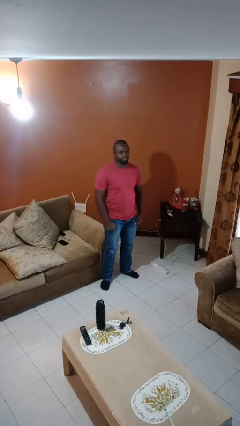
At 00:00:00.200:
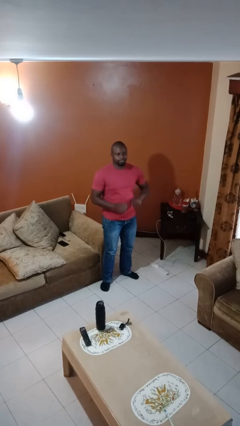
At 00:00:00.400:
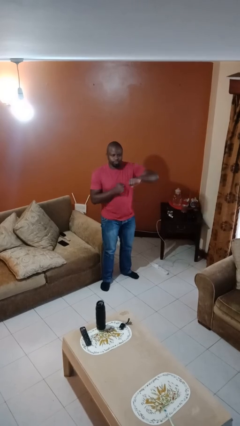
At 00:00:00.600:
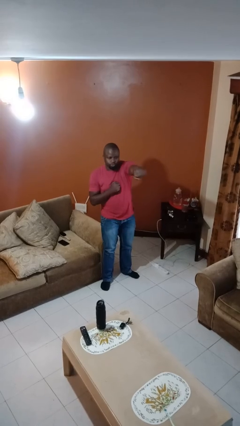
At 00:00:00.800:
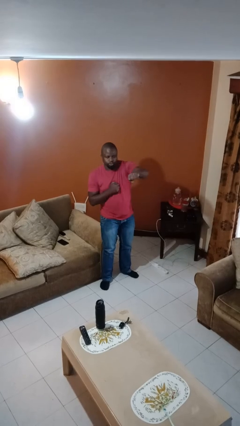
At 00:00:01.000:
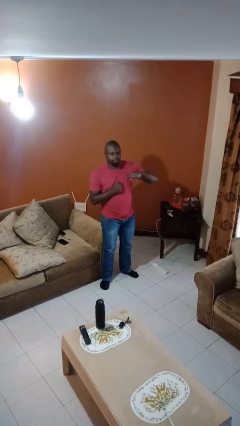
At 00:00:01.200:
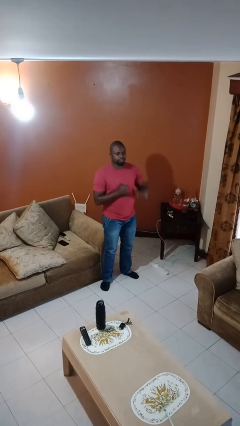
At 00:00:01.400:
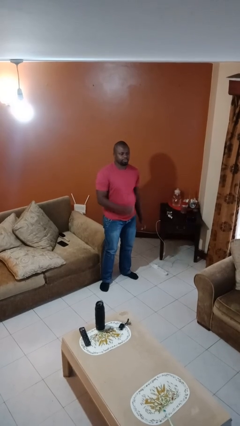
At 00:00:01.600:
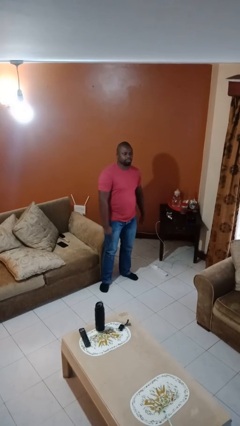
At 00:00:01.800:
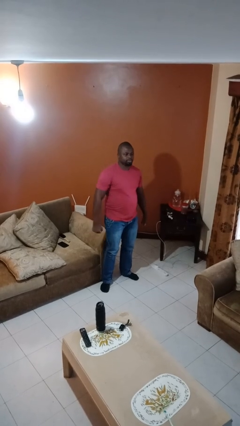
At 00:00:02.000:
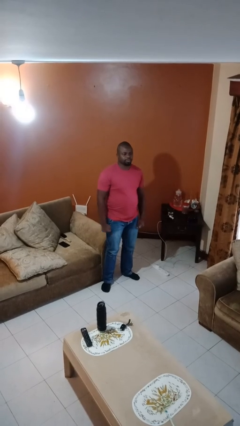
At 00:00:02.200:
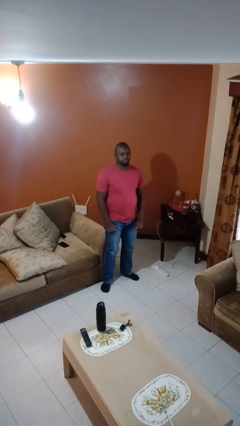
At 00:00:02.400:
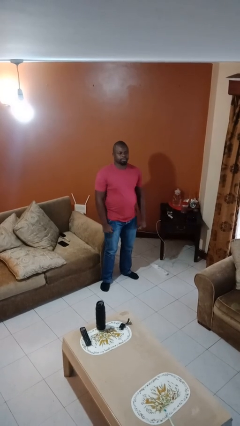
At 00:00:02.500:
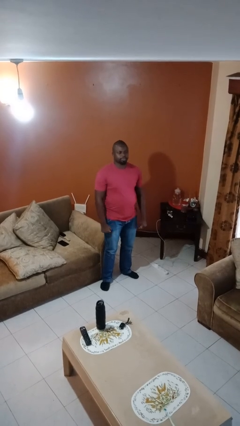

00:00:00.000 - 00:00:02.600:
person punches

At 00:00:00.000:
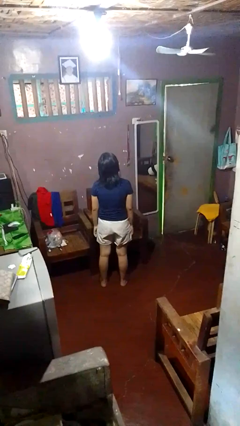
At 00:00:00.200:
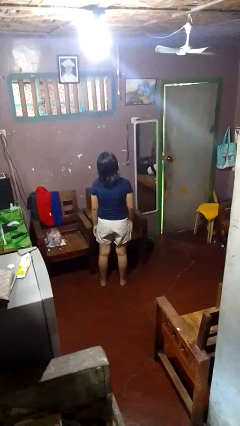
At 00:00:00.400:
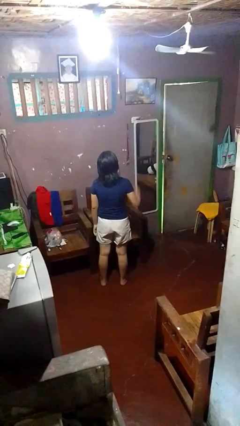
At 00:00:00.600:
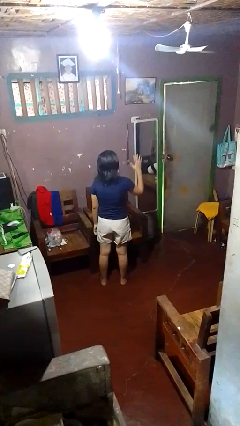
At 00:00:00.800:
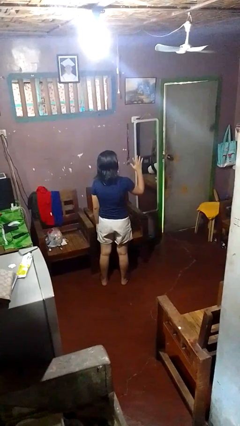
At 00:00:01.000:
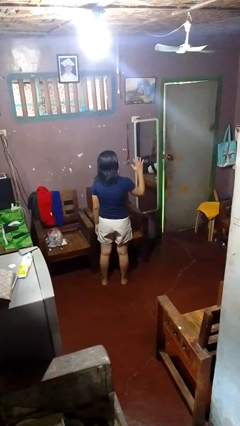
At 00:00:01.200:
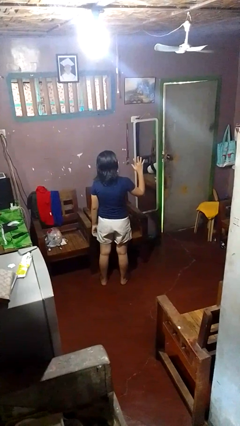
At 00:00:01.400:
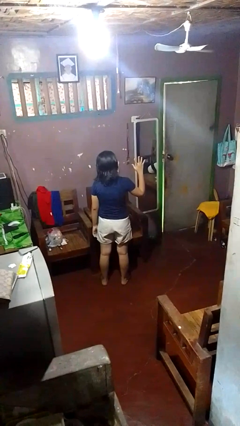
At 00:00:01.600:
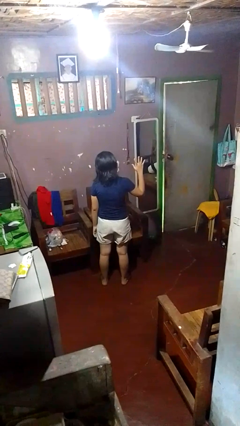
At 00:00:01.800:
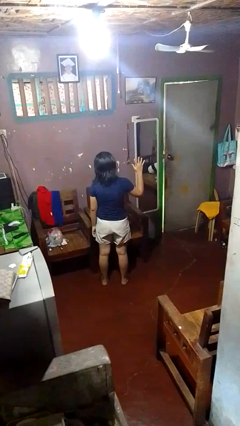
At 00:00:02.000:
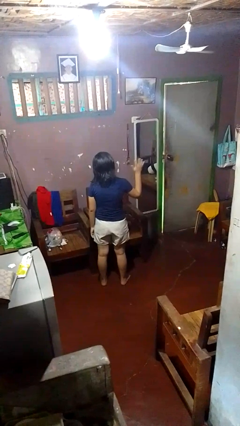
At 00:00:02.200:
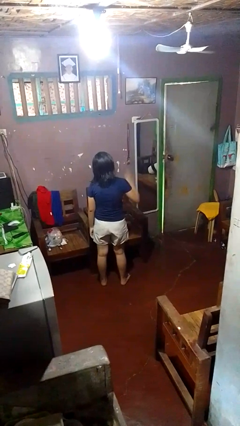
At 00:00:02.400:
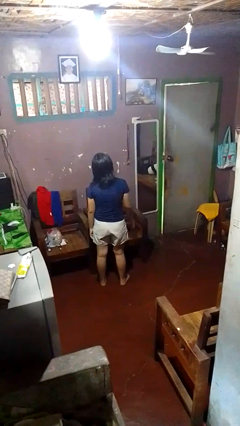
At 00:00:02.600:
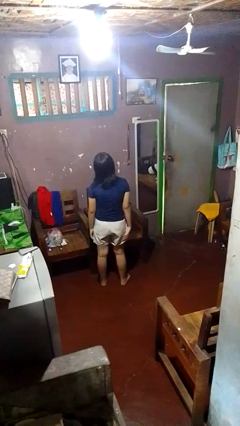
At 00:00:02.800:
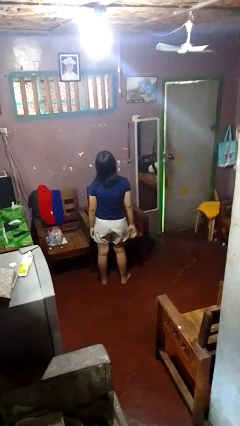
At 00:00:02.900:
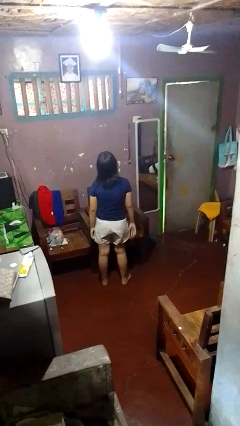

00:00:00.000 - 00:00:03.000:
person gestures number five

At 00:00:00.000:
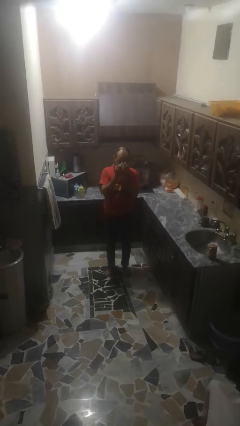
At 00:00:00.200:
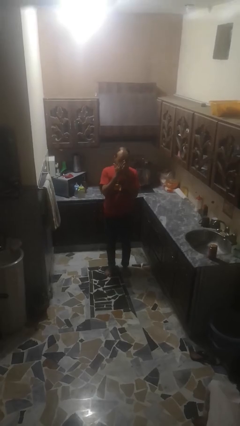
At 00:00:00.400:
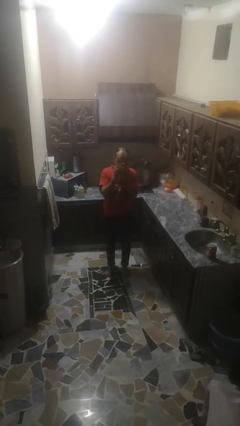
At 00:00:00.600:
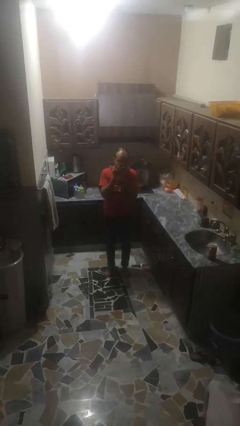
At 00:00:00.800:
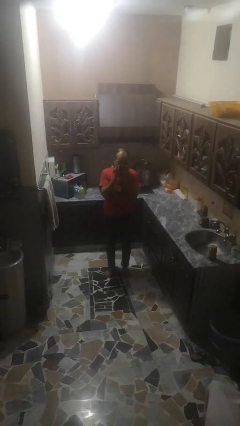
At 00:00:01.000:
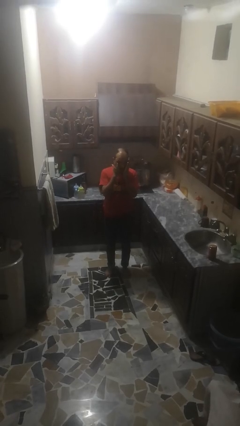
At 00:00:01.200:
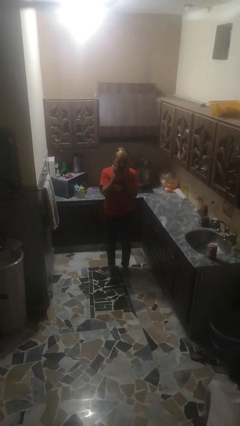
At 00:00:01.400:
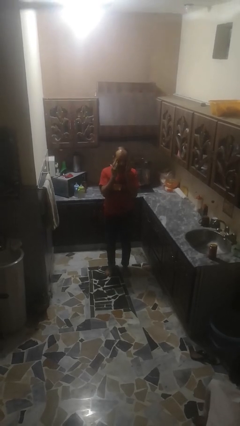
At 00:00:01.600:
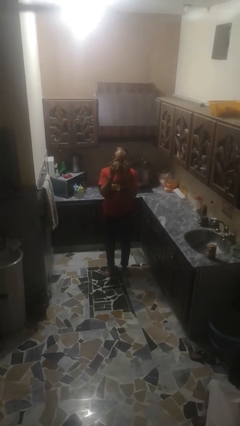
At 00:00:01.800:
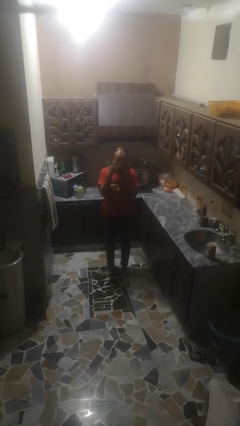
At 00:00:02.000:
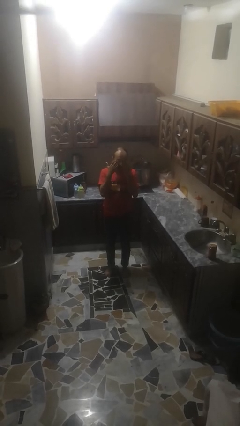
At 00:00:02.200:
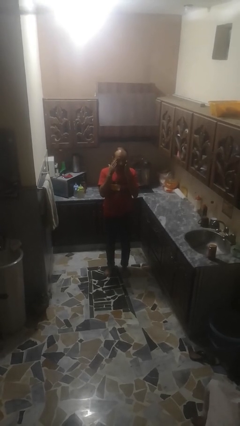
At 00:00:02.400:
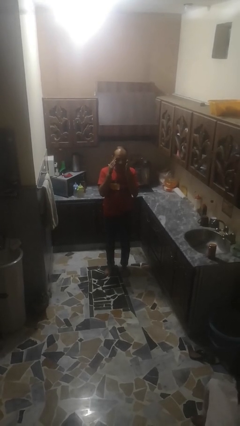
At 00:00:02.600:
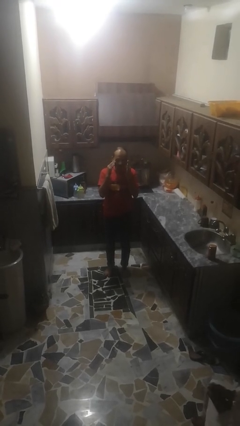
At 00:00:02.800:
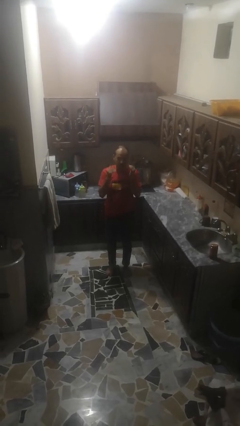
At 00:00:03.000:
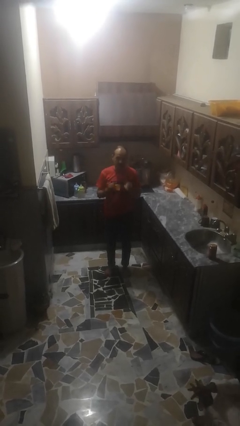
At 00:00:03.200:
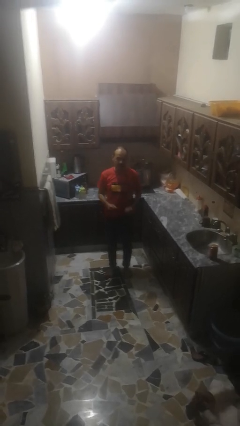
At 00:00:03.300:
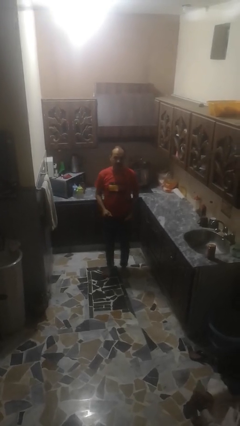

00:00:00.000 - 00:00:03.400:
person rubs eyes

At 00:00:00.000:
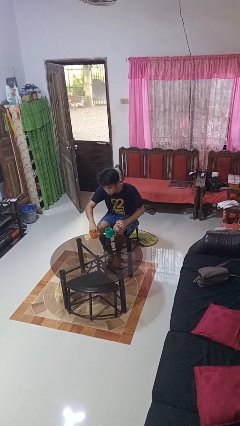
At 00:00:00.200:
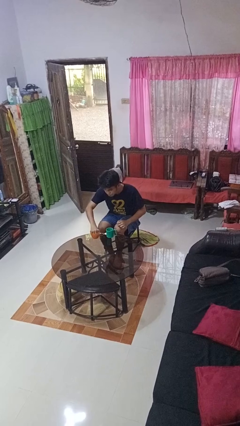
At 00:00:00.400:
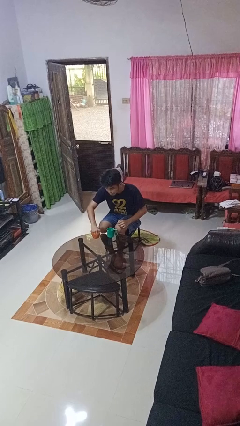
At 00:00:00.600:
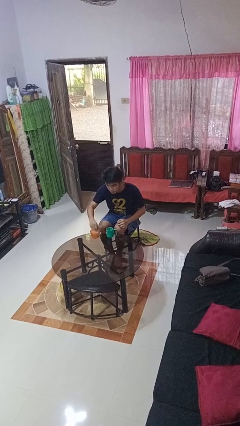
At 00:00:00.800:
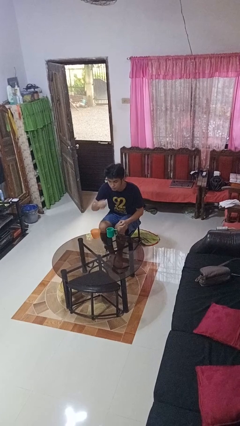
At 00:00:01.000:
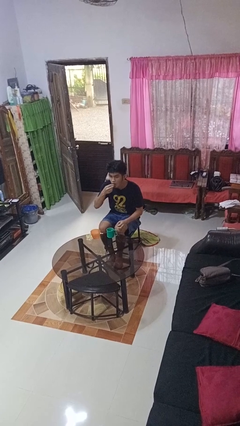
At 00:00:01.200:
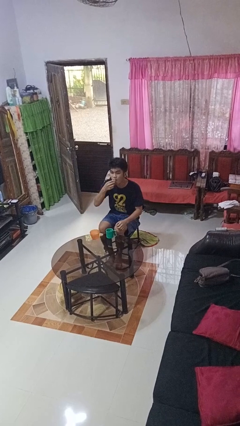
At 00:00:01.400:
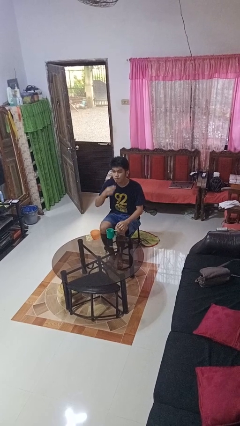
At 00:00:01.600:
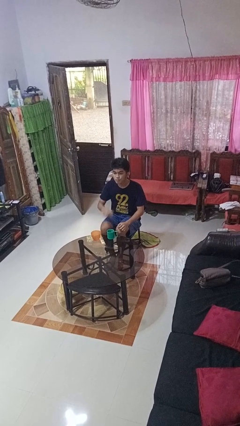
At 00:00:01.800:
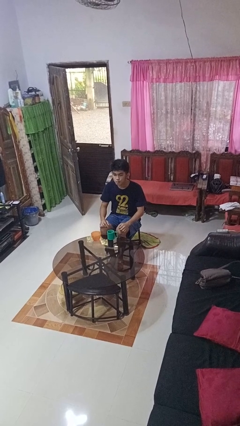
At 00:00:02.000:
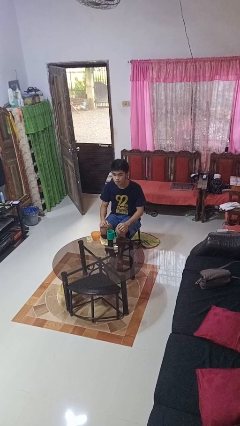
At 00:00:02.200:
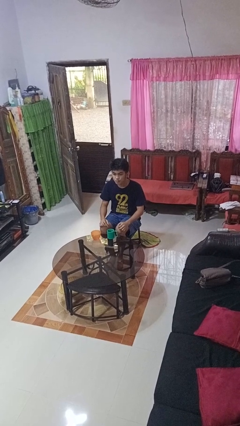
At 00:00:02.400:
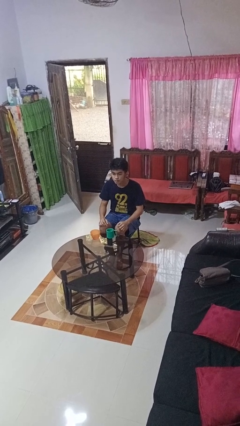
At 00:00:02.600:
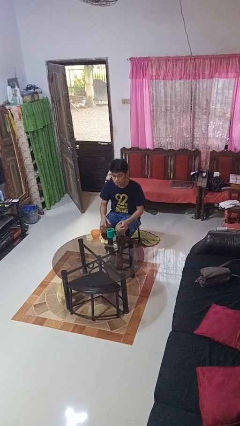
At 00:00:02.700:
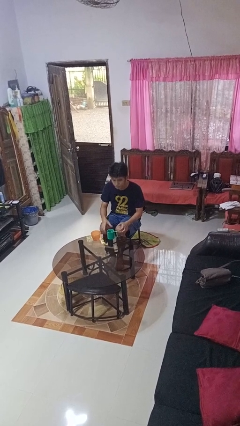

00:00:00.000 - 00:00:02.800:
person takes medicine pills

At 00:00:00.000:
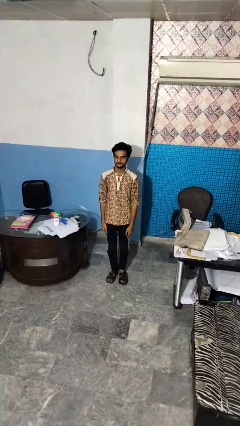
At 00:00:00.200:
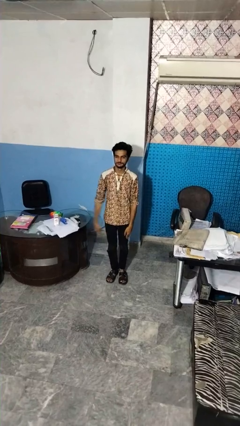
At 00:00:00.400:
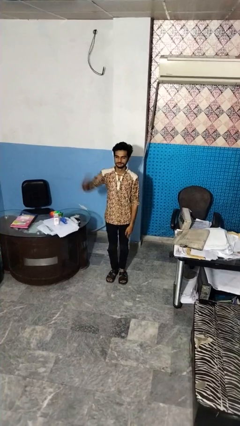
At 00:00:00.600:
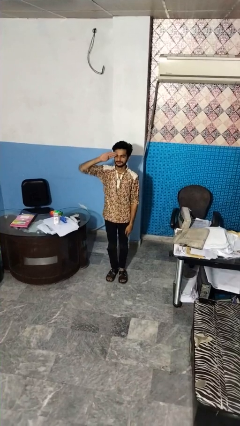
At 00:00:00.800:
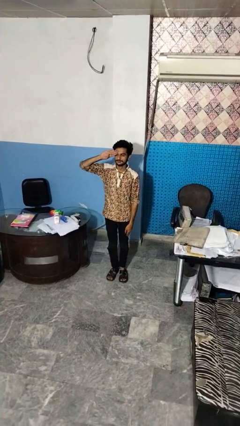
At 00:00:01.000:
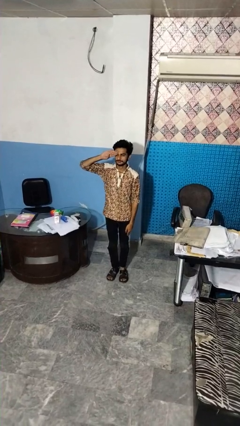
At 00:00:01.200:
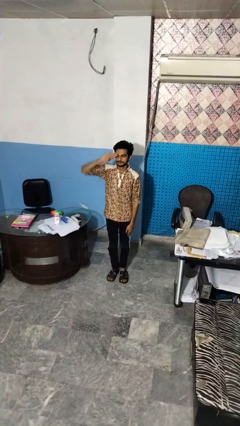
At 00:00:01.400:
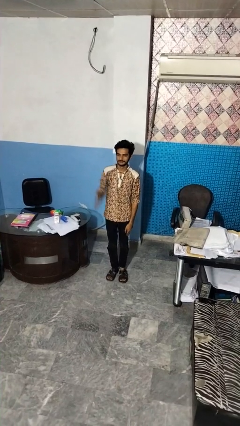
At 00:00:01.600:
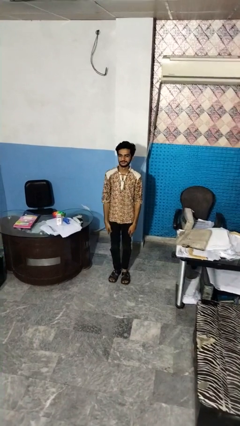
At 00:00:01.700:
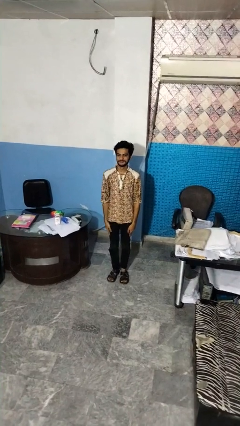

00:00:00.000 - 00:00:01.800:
person salutes

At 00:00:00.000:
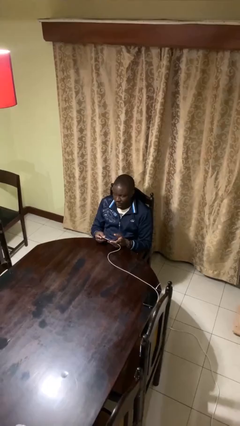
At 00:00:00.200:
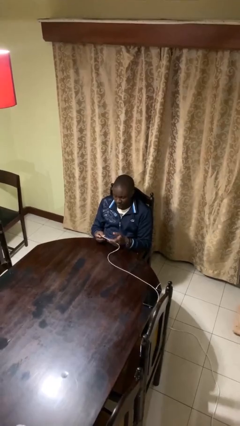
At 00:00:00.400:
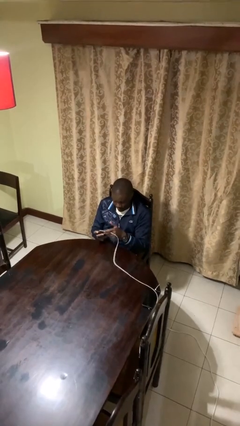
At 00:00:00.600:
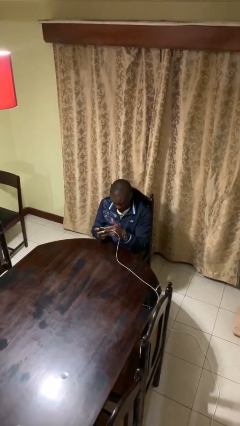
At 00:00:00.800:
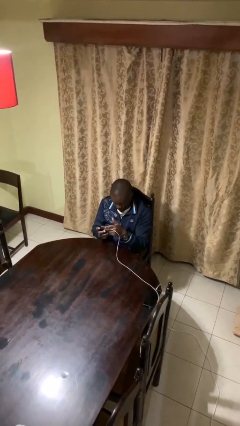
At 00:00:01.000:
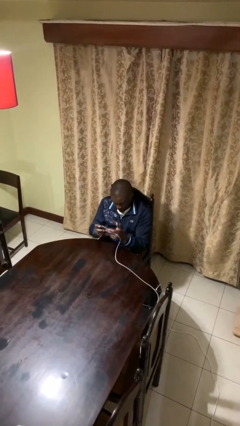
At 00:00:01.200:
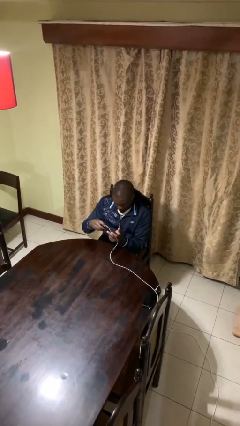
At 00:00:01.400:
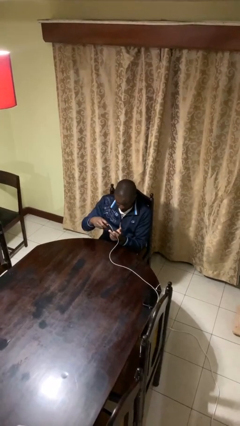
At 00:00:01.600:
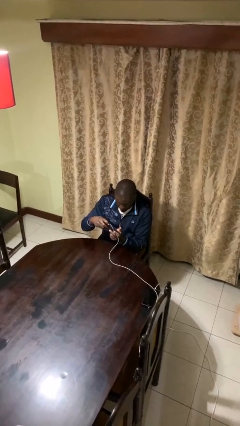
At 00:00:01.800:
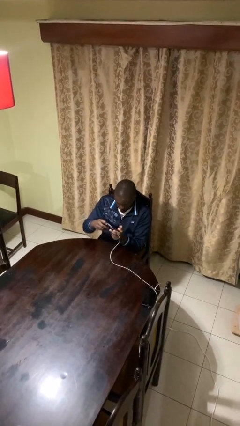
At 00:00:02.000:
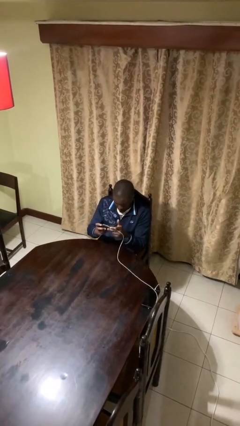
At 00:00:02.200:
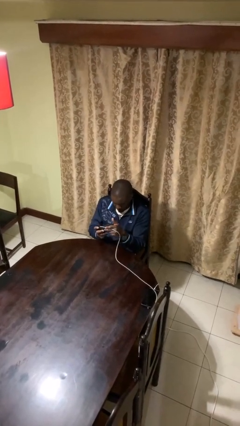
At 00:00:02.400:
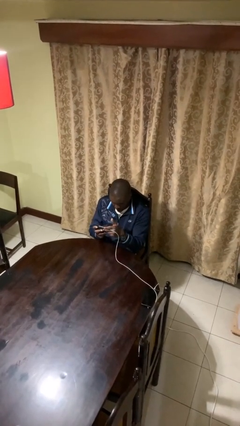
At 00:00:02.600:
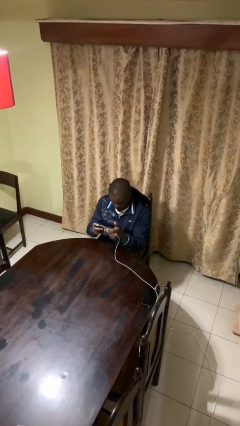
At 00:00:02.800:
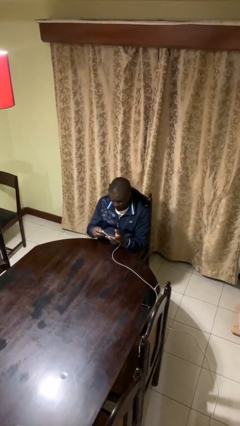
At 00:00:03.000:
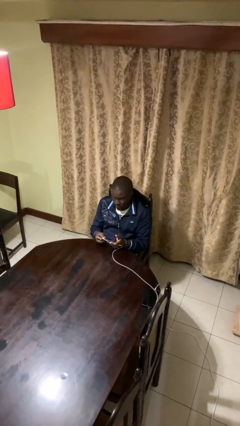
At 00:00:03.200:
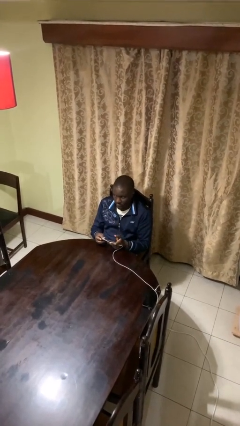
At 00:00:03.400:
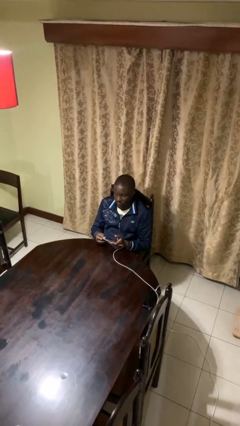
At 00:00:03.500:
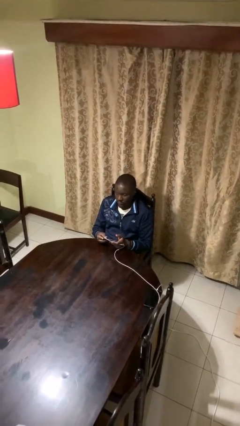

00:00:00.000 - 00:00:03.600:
person interacts with handheld game

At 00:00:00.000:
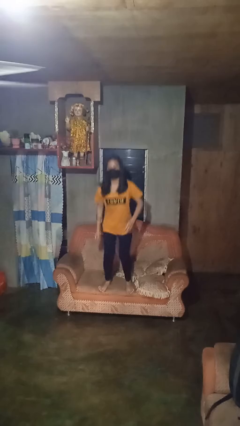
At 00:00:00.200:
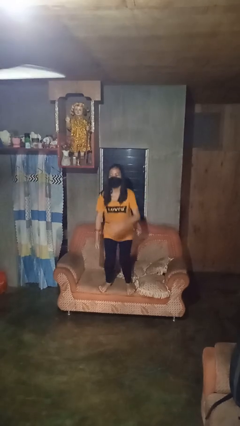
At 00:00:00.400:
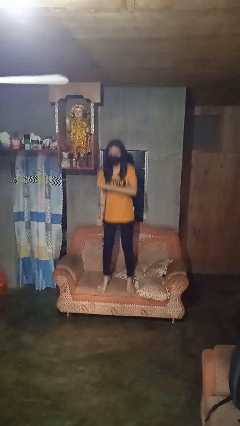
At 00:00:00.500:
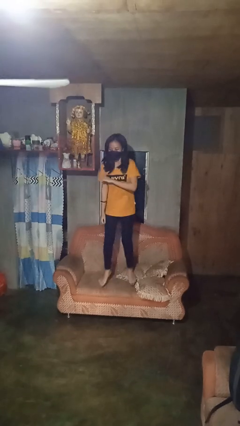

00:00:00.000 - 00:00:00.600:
person jumps on couch
